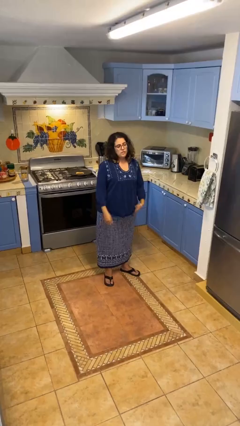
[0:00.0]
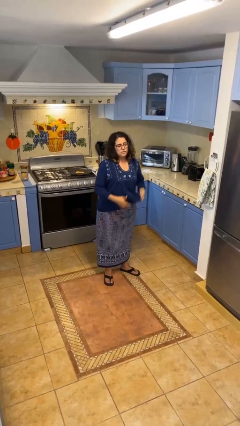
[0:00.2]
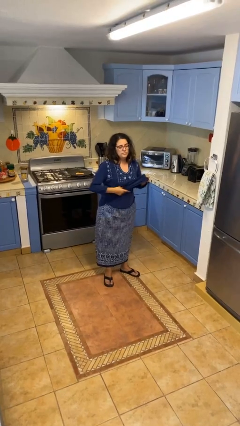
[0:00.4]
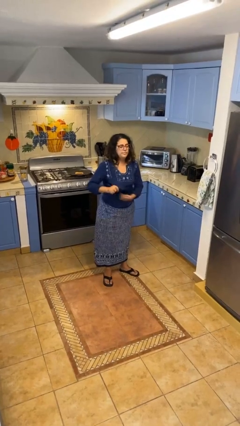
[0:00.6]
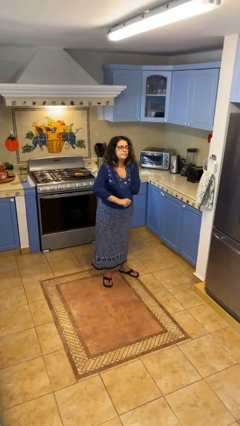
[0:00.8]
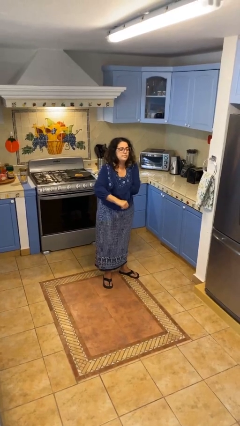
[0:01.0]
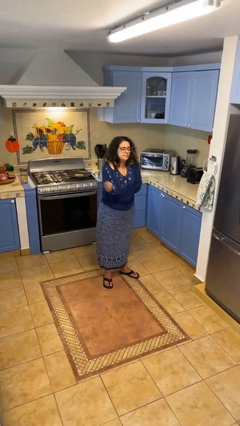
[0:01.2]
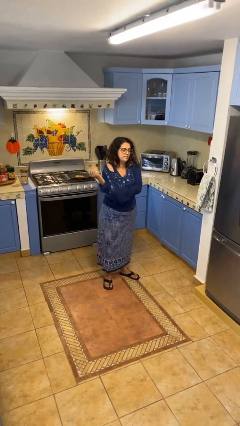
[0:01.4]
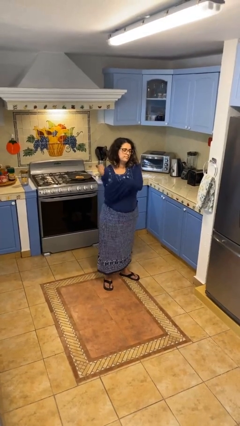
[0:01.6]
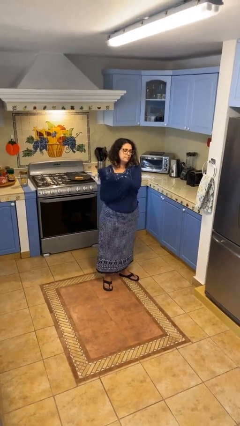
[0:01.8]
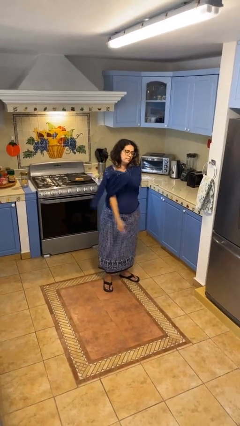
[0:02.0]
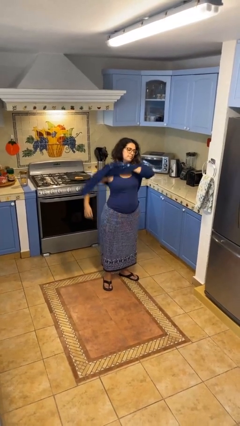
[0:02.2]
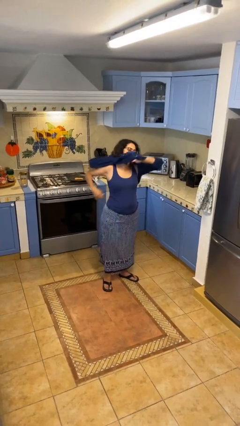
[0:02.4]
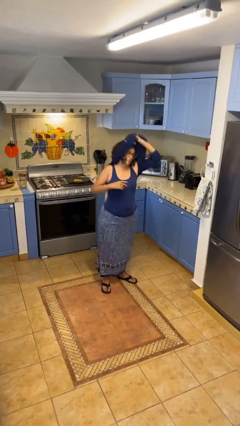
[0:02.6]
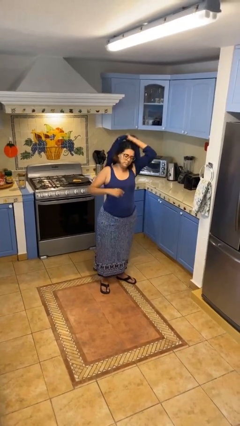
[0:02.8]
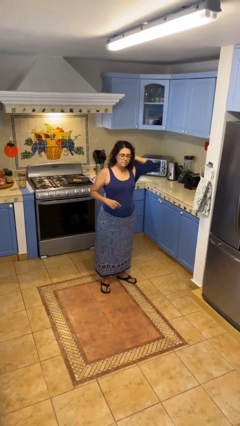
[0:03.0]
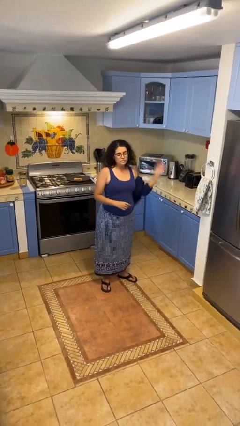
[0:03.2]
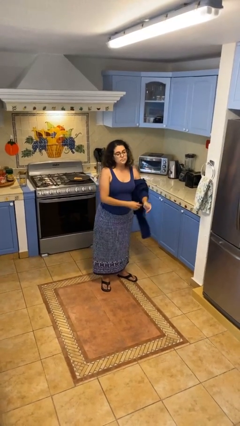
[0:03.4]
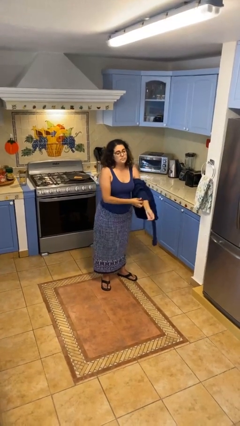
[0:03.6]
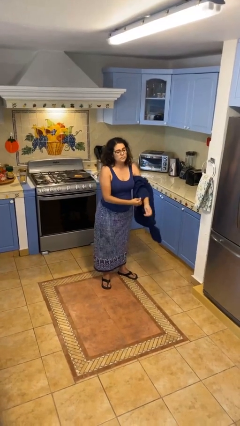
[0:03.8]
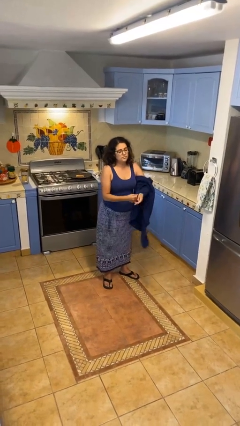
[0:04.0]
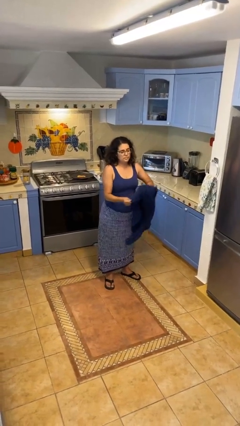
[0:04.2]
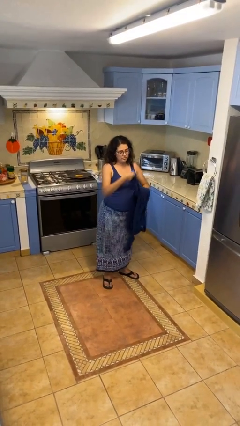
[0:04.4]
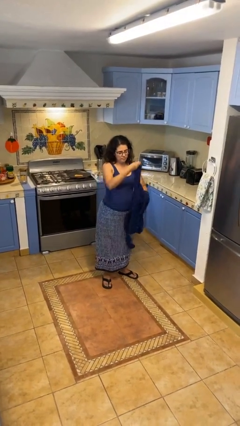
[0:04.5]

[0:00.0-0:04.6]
person takes off shirt

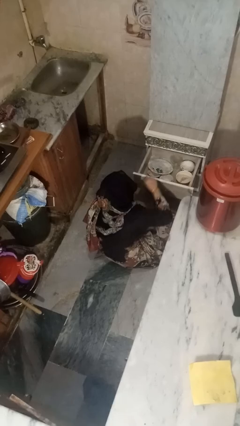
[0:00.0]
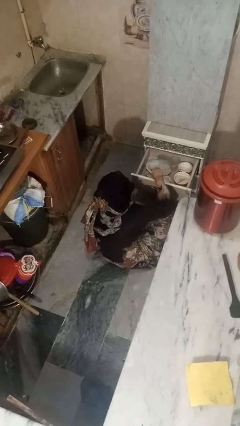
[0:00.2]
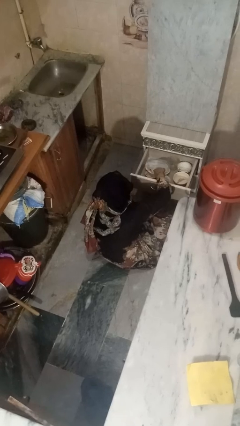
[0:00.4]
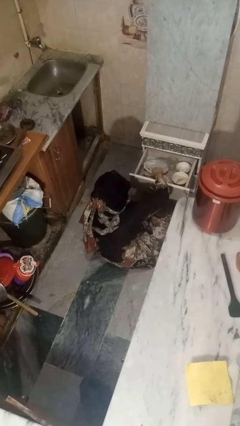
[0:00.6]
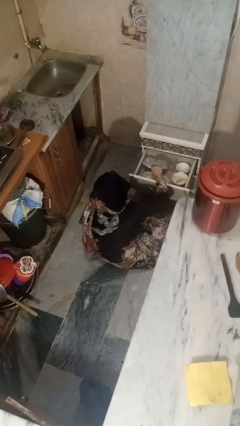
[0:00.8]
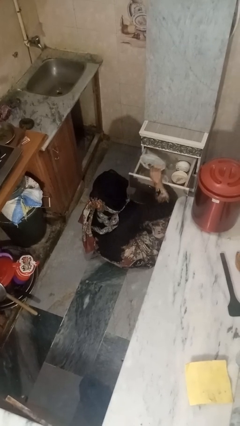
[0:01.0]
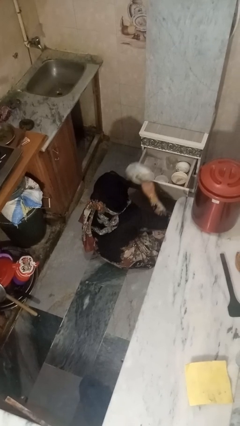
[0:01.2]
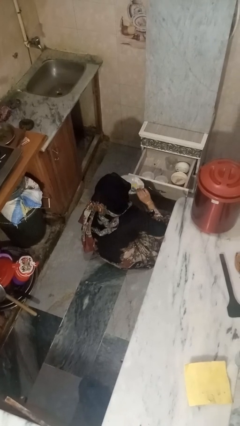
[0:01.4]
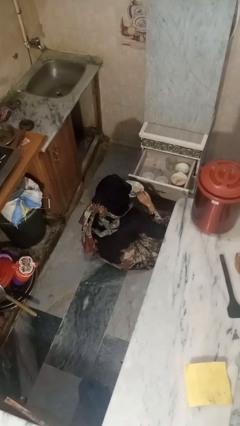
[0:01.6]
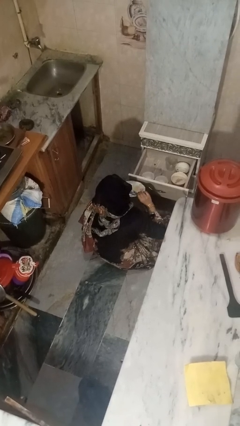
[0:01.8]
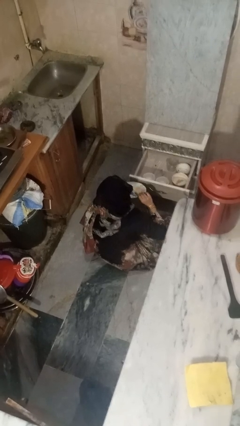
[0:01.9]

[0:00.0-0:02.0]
person takes object from kitchen drawer

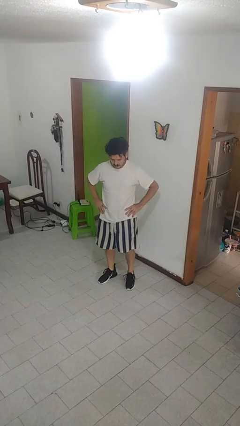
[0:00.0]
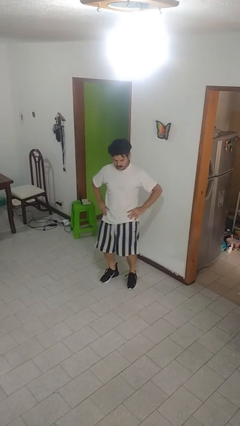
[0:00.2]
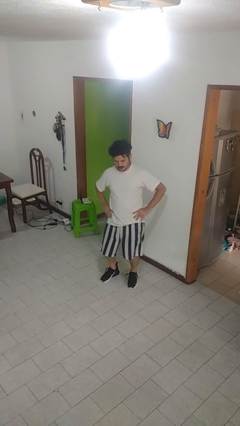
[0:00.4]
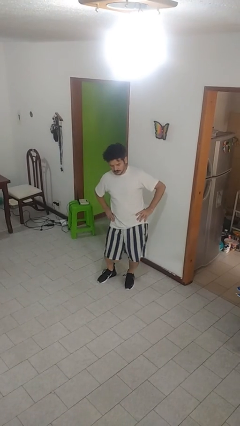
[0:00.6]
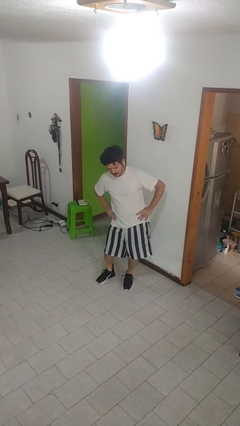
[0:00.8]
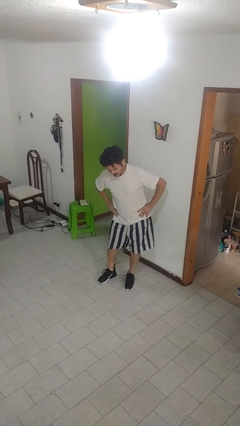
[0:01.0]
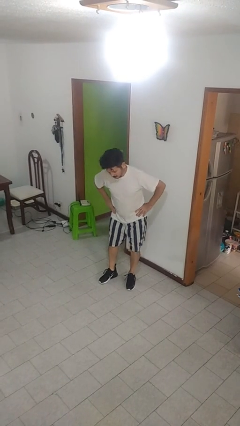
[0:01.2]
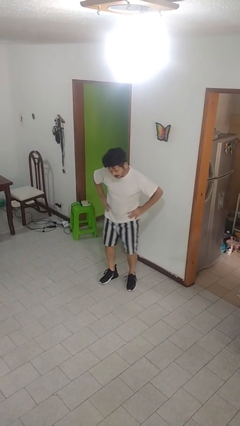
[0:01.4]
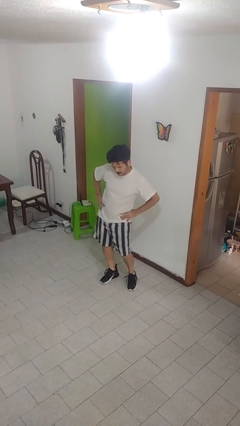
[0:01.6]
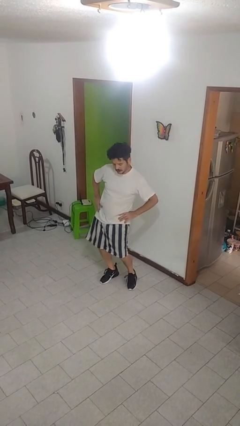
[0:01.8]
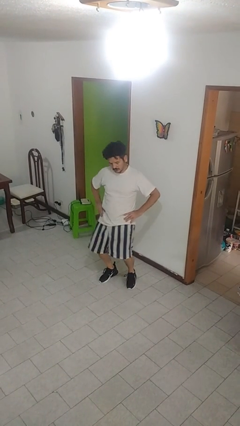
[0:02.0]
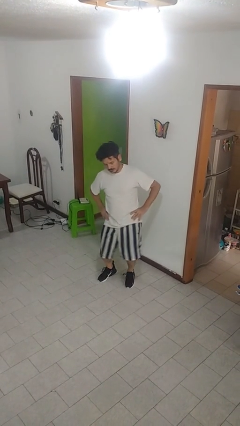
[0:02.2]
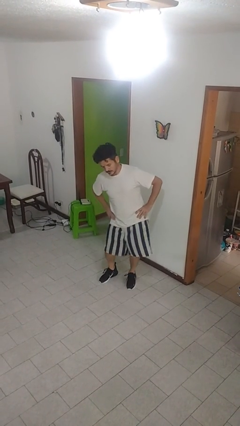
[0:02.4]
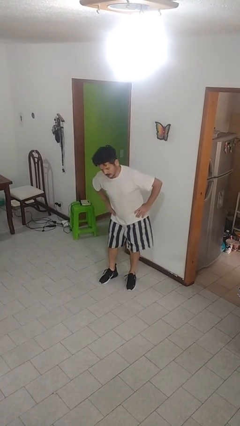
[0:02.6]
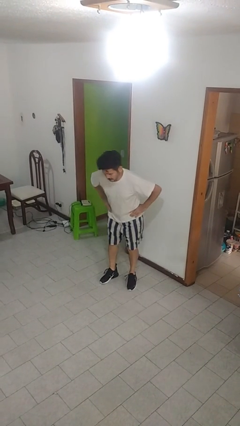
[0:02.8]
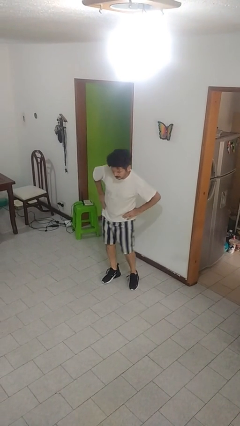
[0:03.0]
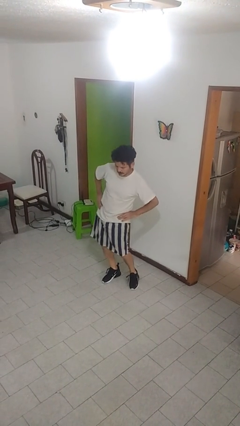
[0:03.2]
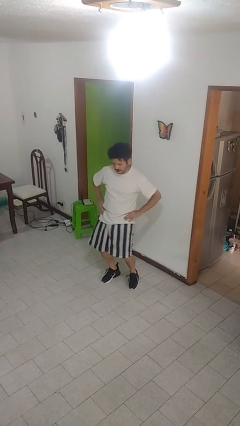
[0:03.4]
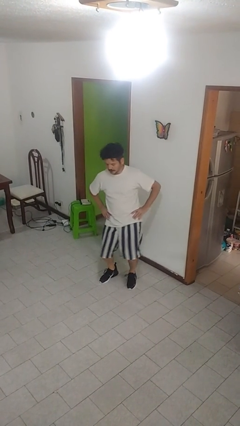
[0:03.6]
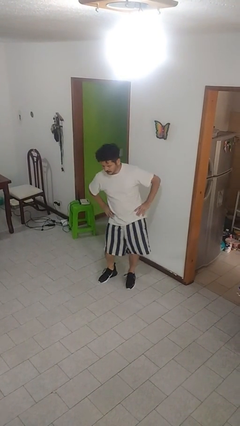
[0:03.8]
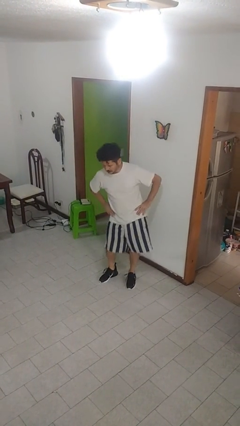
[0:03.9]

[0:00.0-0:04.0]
person wiggles hips

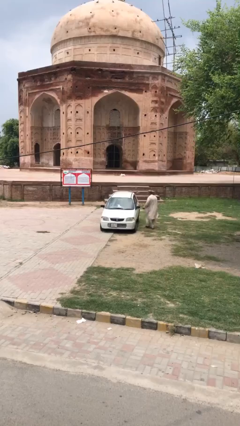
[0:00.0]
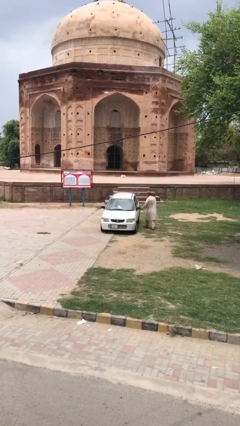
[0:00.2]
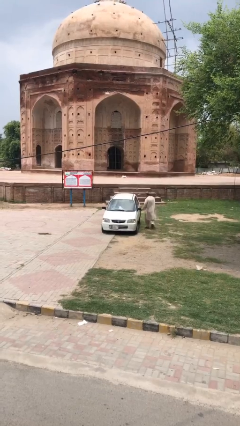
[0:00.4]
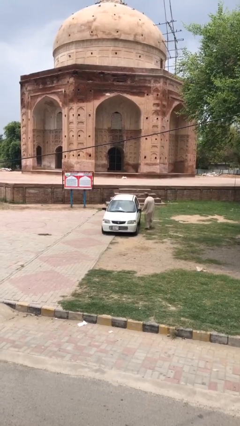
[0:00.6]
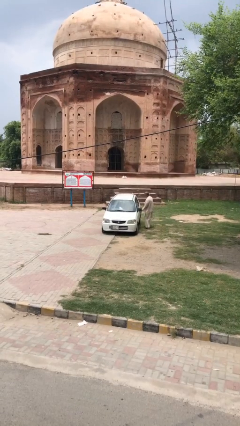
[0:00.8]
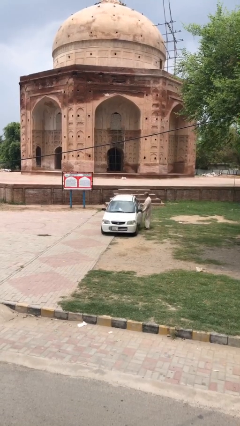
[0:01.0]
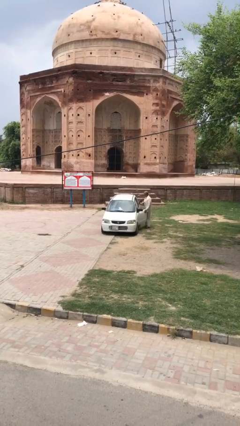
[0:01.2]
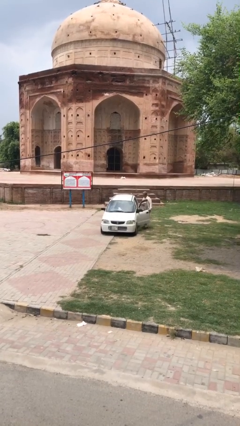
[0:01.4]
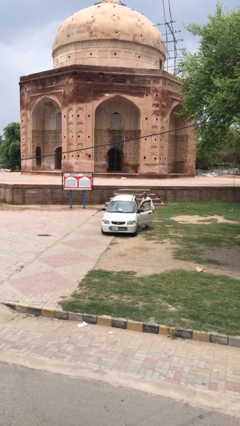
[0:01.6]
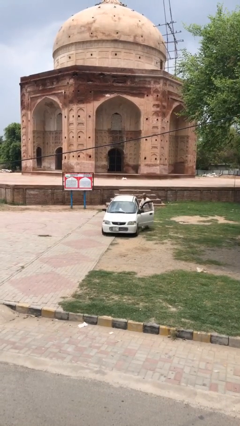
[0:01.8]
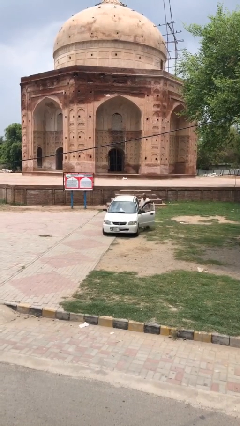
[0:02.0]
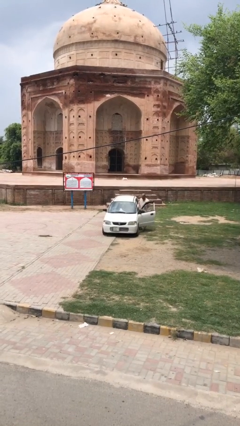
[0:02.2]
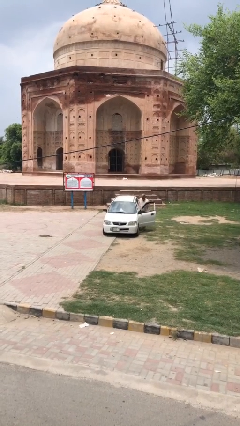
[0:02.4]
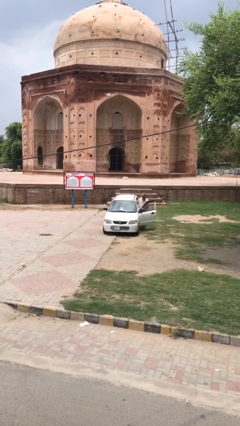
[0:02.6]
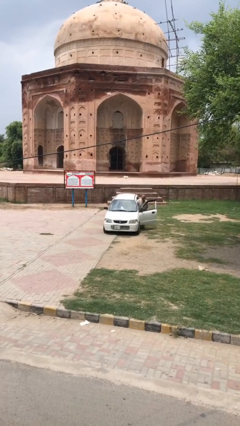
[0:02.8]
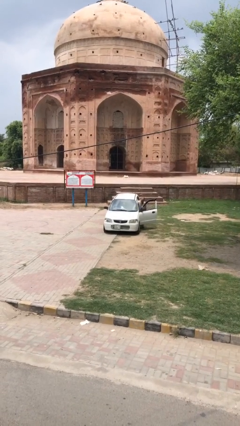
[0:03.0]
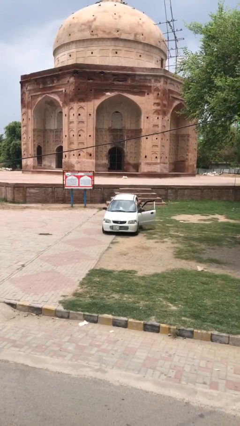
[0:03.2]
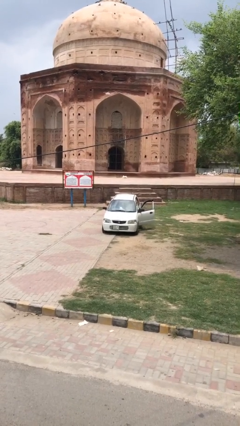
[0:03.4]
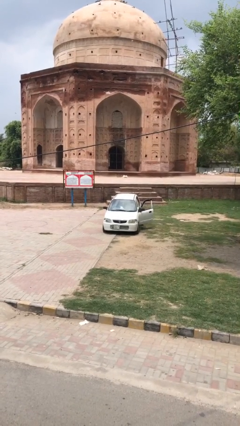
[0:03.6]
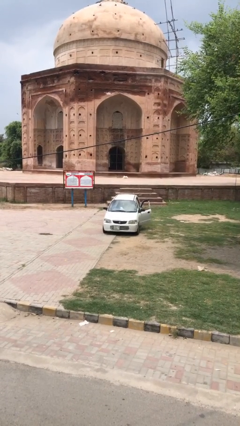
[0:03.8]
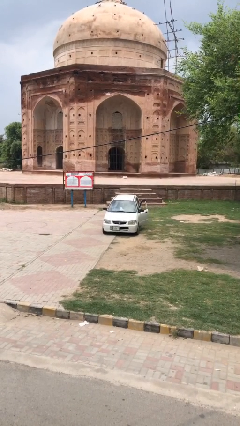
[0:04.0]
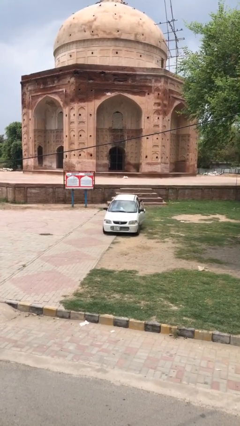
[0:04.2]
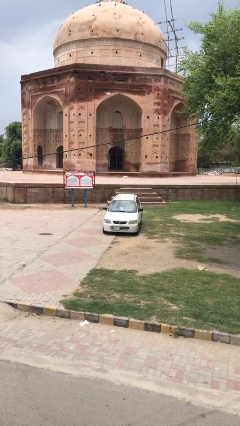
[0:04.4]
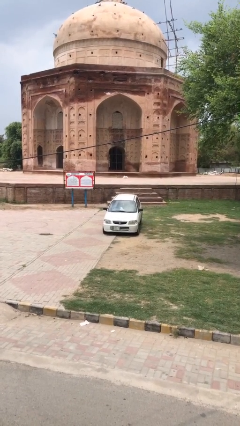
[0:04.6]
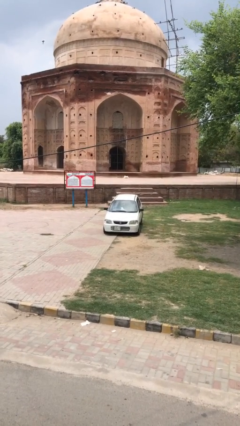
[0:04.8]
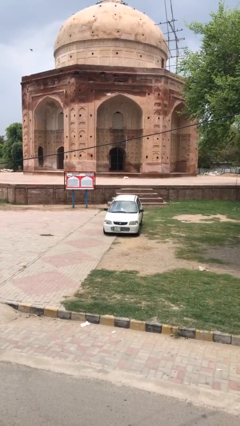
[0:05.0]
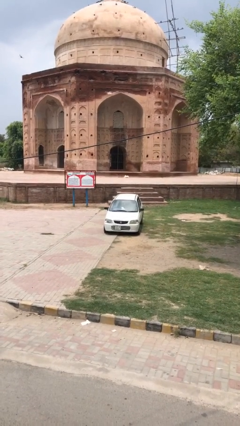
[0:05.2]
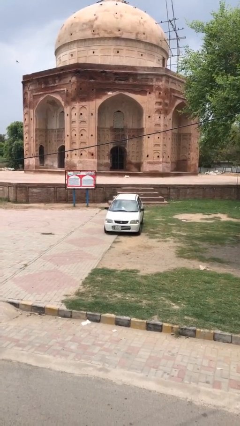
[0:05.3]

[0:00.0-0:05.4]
car picks up person

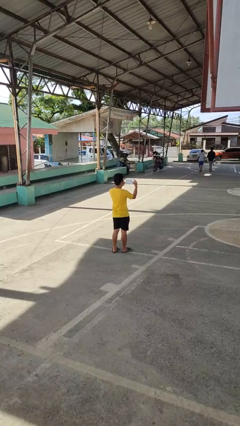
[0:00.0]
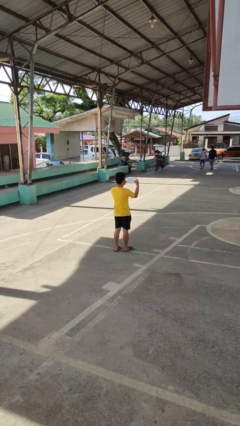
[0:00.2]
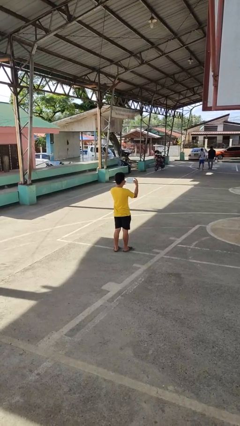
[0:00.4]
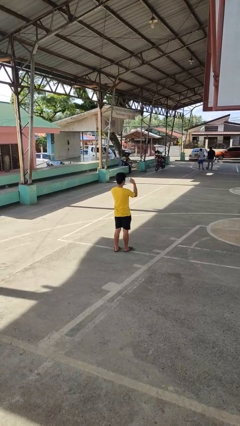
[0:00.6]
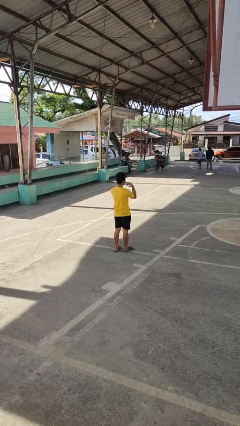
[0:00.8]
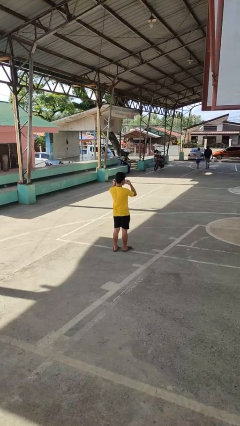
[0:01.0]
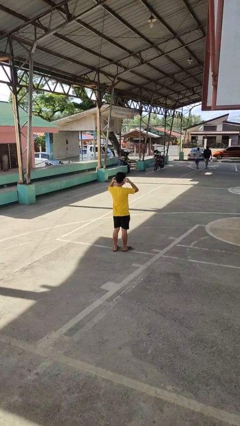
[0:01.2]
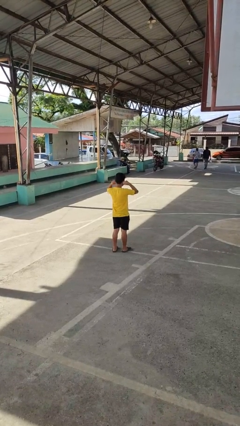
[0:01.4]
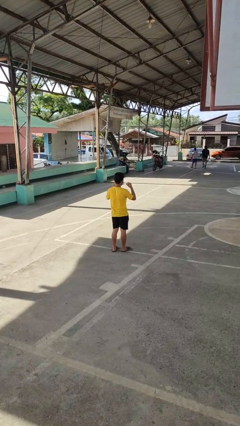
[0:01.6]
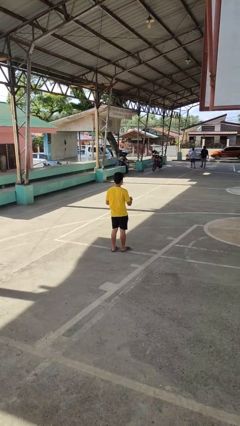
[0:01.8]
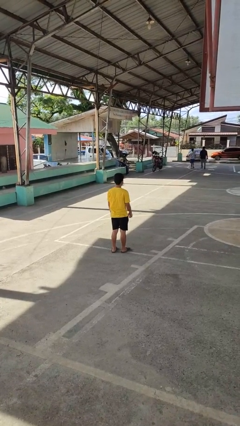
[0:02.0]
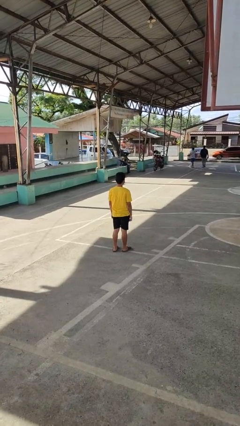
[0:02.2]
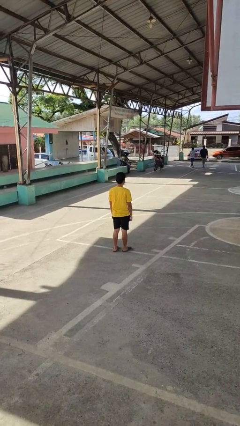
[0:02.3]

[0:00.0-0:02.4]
person puts on facemask
